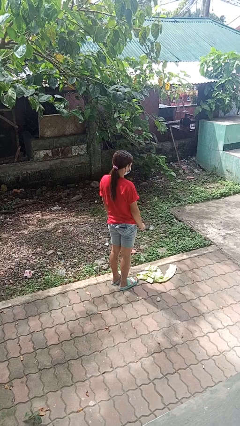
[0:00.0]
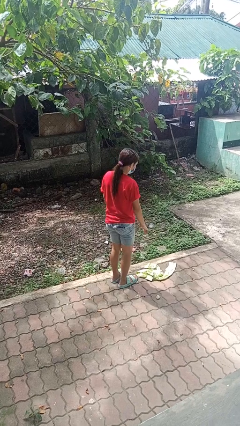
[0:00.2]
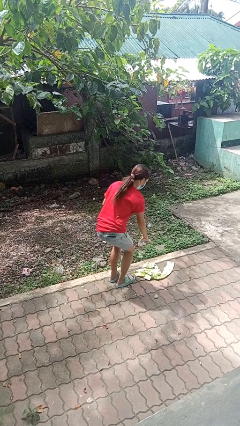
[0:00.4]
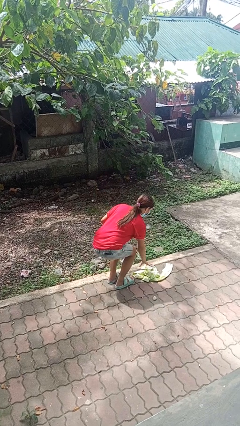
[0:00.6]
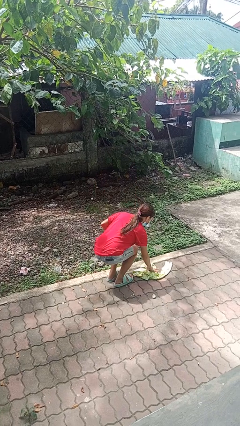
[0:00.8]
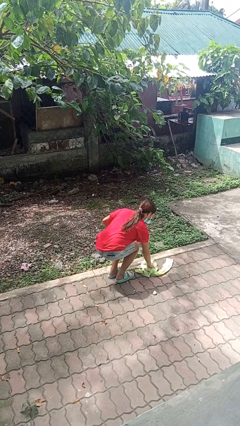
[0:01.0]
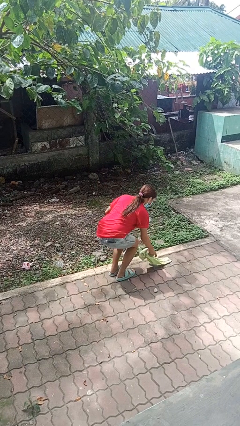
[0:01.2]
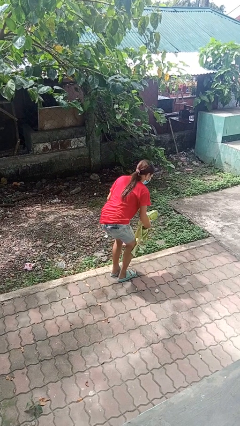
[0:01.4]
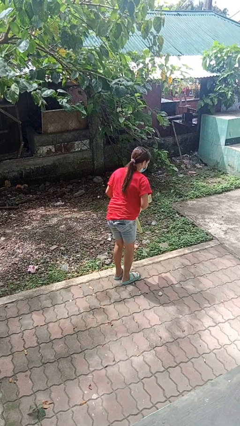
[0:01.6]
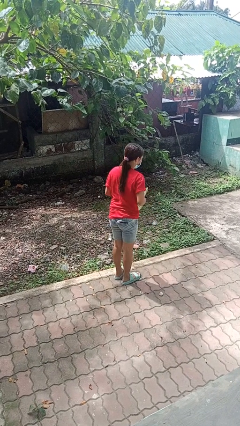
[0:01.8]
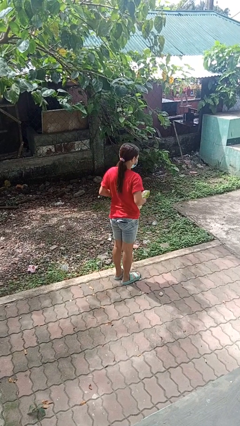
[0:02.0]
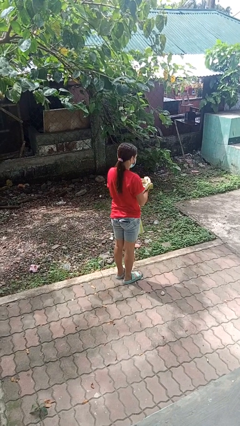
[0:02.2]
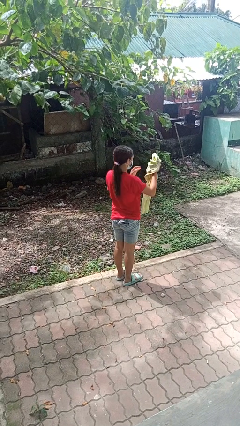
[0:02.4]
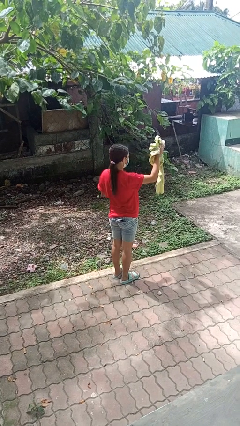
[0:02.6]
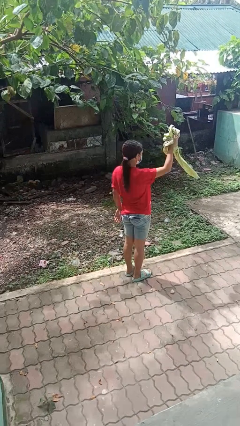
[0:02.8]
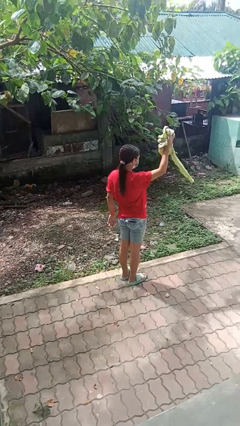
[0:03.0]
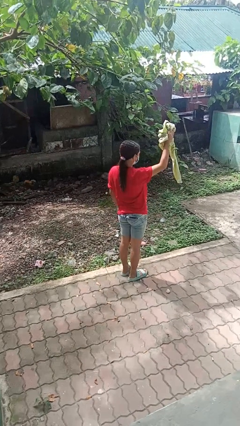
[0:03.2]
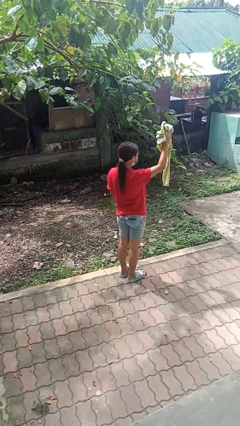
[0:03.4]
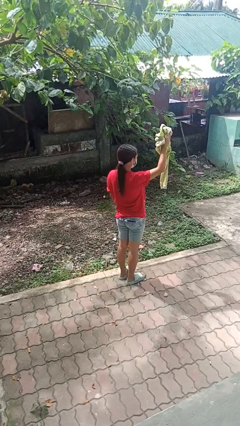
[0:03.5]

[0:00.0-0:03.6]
person picks up object from floor

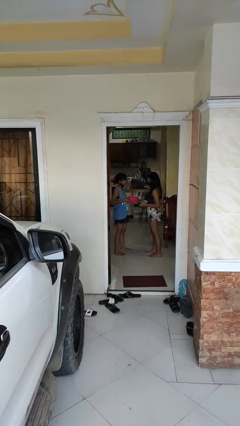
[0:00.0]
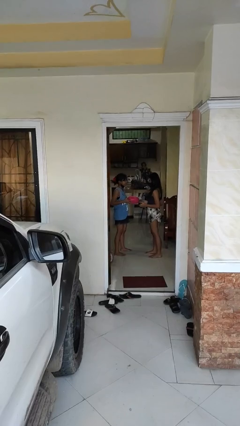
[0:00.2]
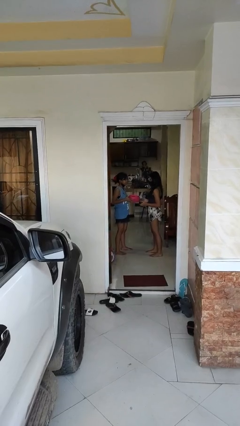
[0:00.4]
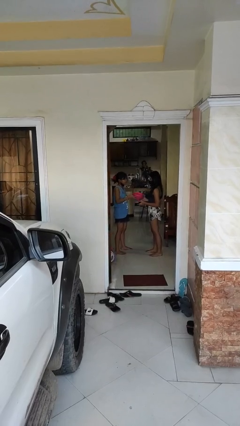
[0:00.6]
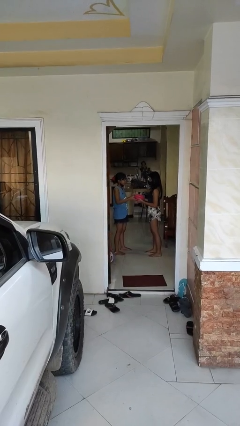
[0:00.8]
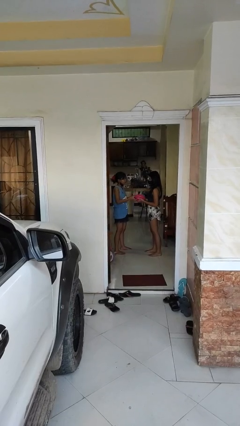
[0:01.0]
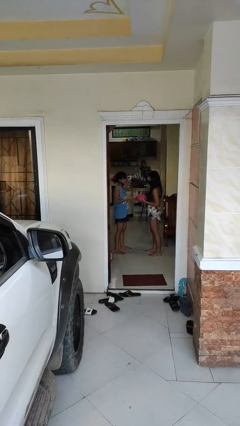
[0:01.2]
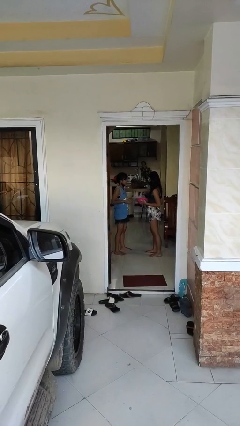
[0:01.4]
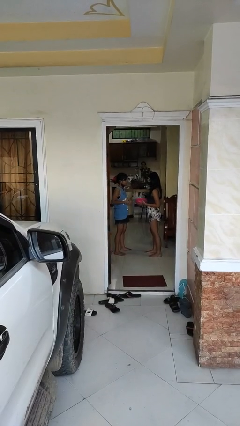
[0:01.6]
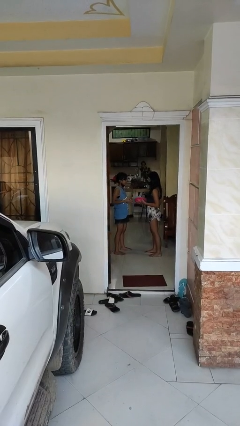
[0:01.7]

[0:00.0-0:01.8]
person transfers object to person

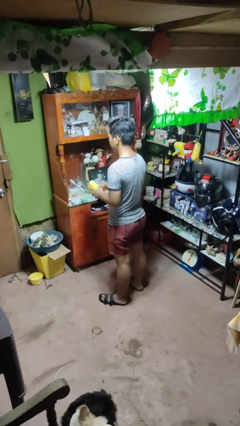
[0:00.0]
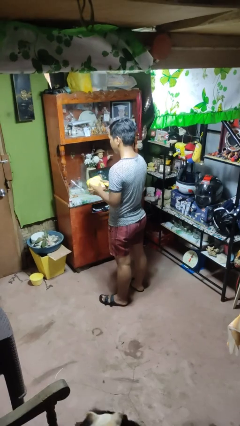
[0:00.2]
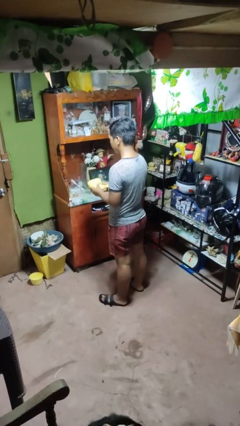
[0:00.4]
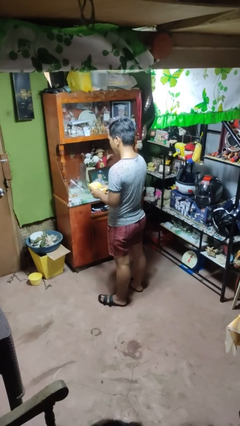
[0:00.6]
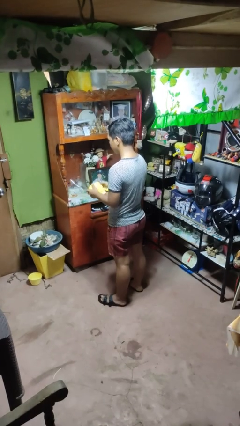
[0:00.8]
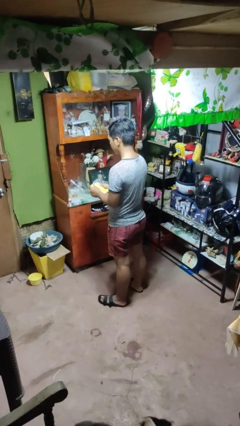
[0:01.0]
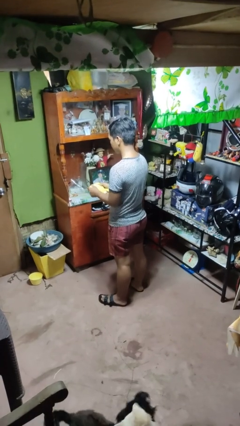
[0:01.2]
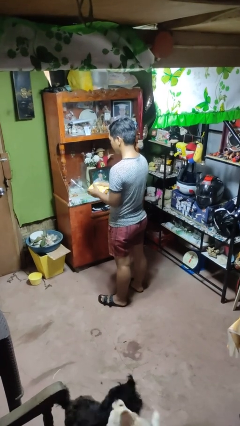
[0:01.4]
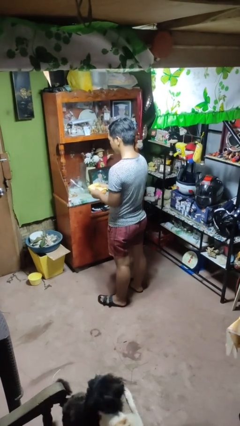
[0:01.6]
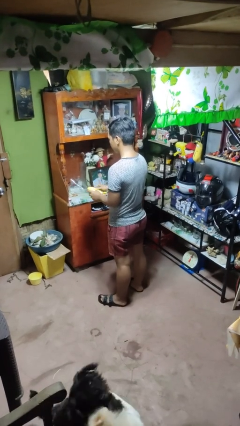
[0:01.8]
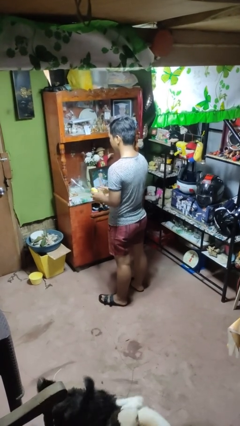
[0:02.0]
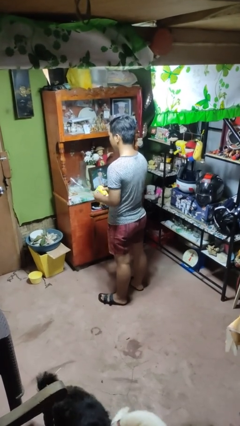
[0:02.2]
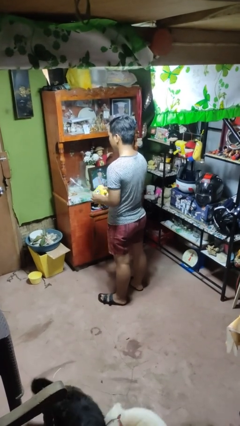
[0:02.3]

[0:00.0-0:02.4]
person squeezes object

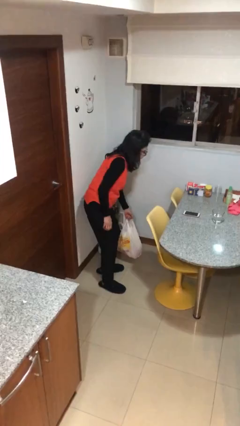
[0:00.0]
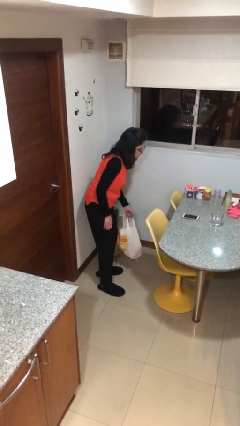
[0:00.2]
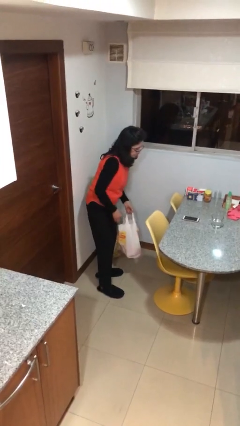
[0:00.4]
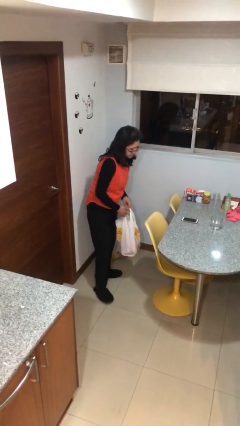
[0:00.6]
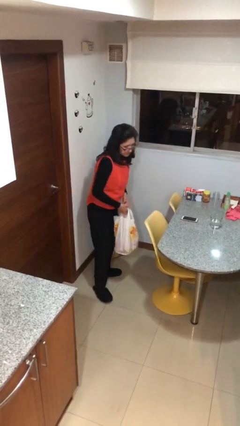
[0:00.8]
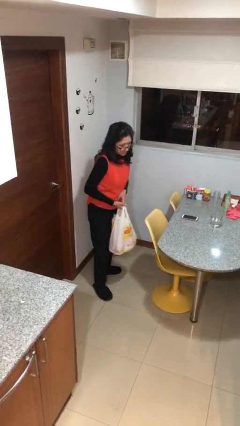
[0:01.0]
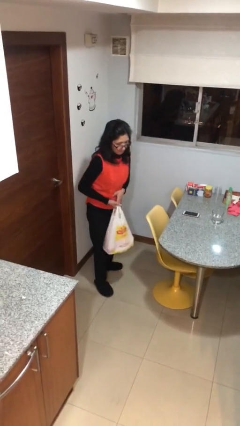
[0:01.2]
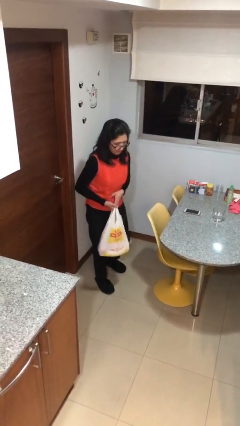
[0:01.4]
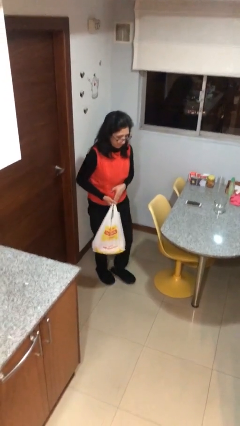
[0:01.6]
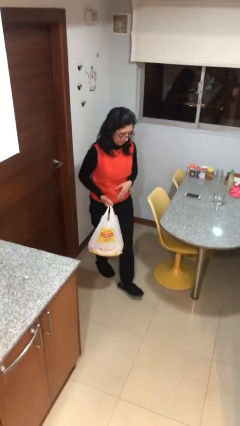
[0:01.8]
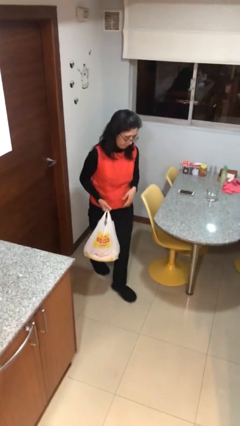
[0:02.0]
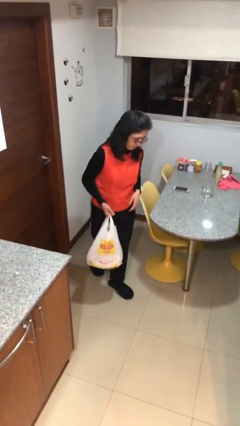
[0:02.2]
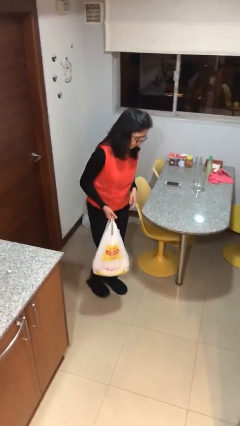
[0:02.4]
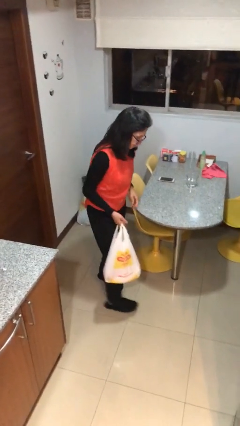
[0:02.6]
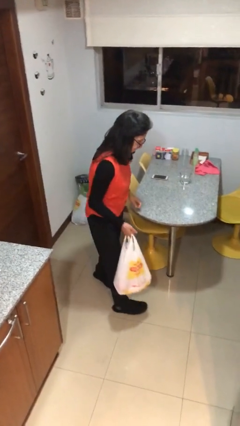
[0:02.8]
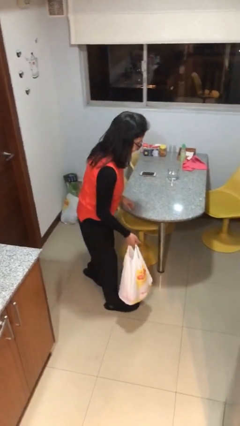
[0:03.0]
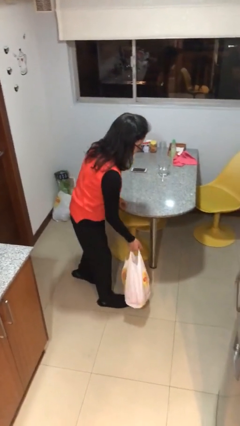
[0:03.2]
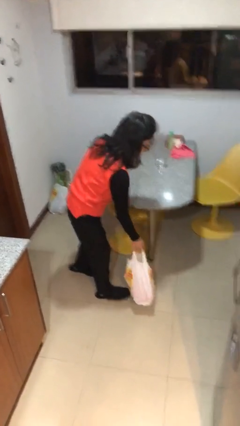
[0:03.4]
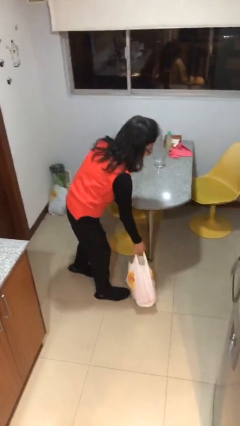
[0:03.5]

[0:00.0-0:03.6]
person carries heavy object

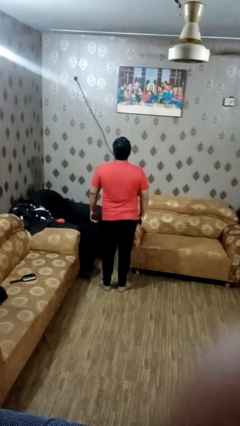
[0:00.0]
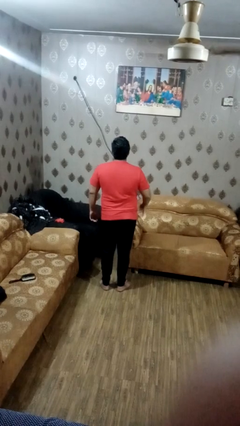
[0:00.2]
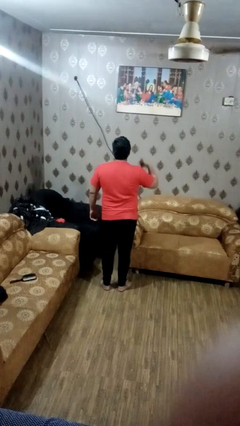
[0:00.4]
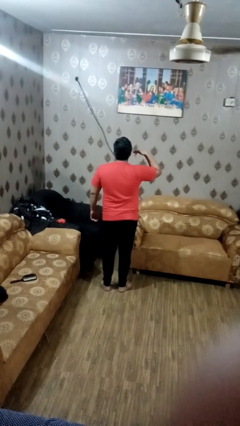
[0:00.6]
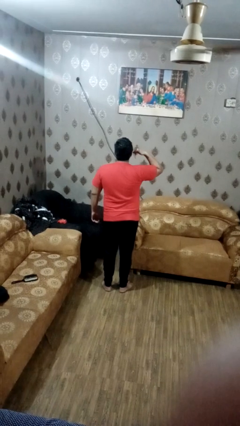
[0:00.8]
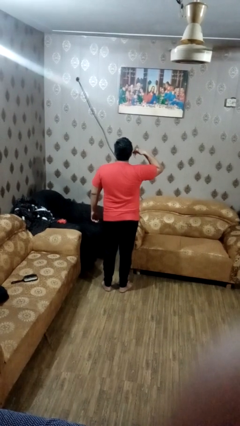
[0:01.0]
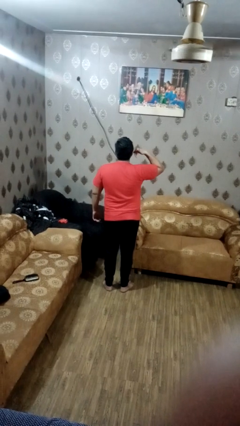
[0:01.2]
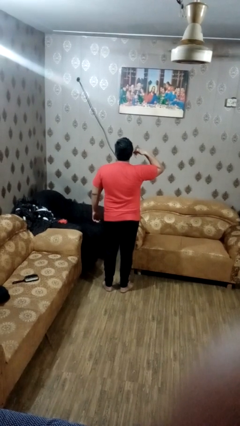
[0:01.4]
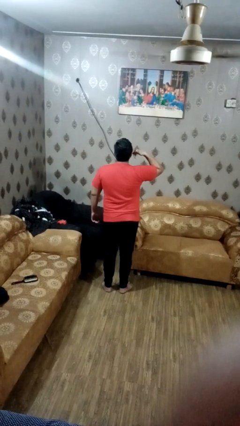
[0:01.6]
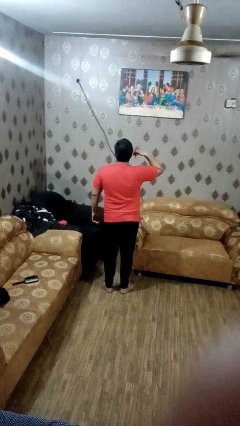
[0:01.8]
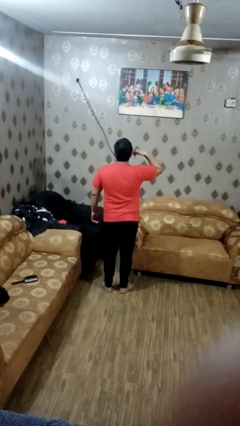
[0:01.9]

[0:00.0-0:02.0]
person gestures call me

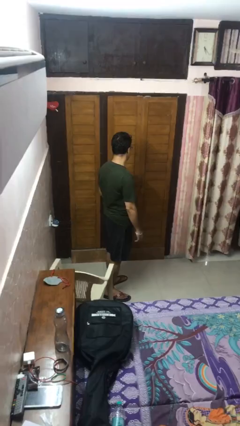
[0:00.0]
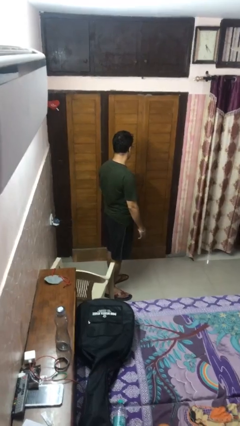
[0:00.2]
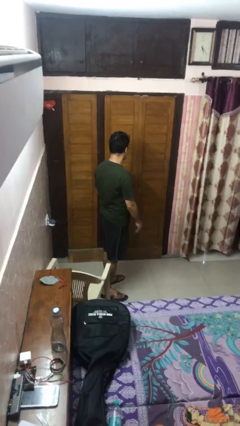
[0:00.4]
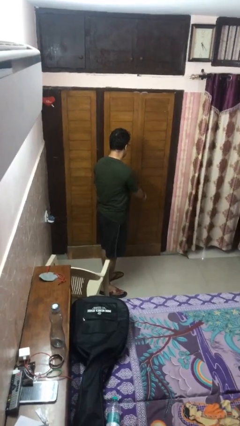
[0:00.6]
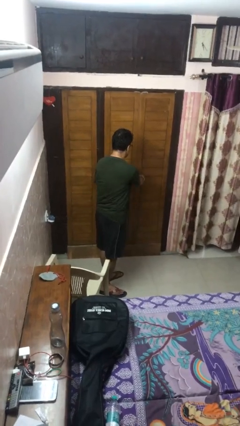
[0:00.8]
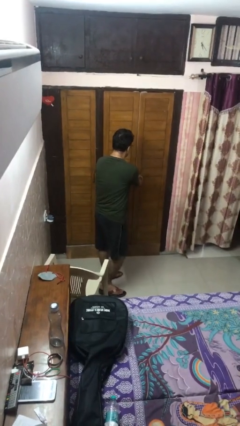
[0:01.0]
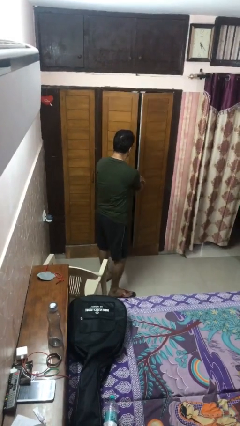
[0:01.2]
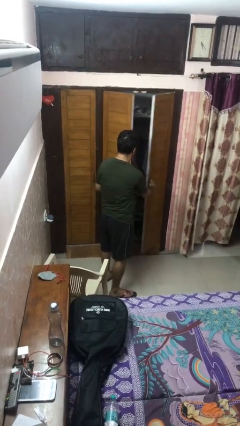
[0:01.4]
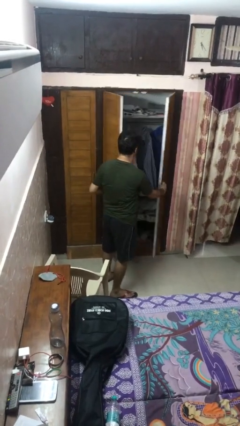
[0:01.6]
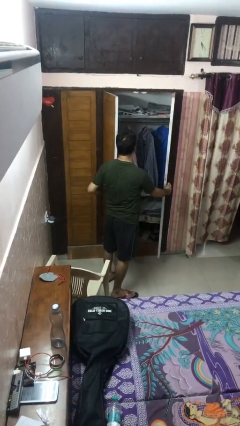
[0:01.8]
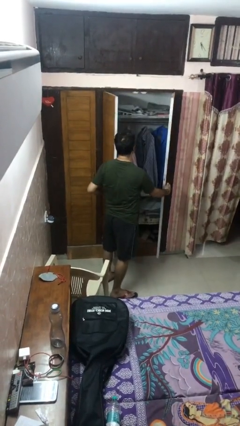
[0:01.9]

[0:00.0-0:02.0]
person opens closet door

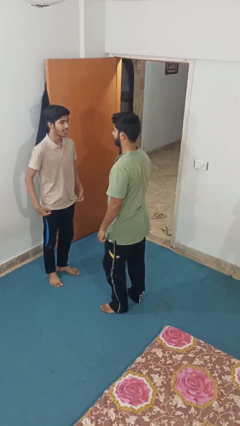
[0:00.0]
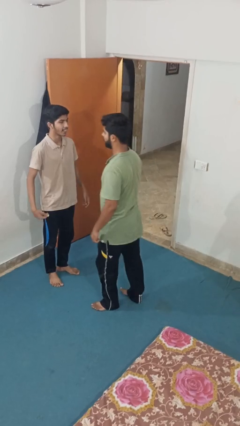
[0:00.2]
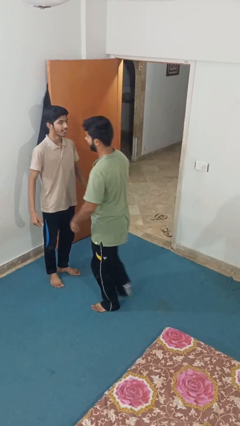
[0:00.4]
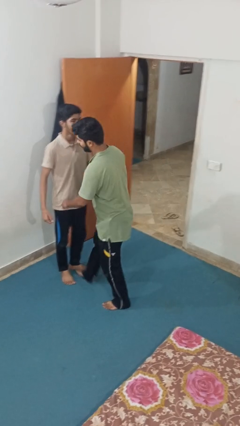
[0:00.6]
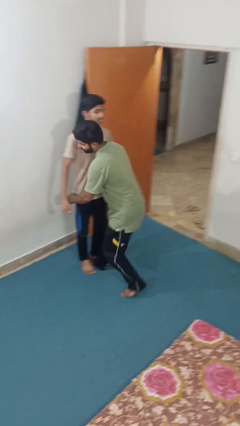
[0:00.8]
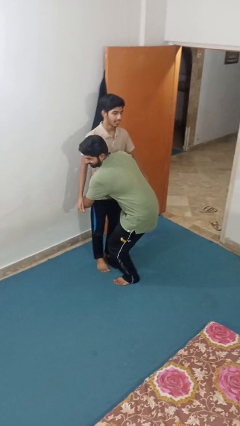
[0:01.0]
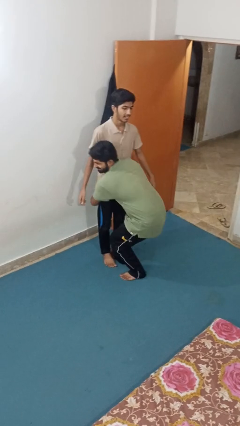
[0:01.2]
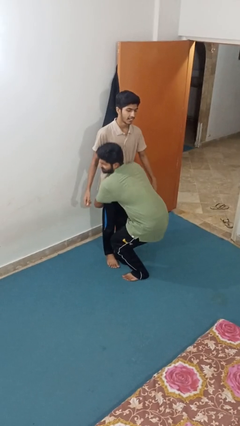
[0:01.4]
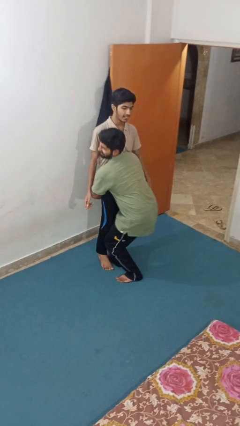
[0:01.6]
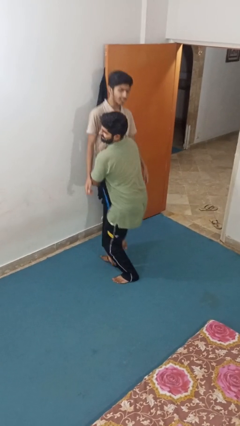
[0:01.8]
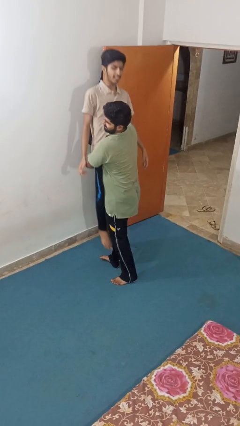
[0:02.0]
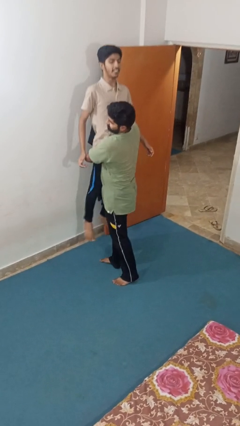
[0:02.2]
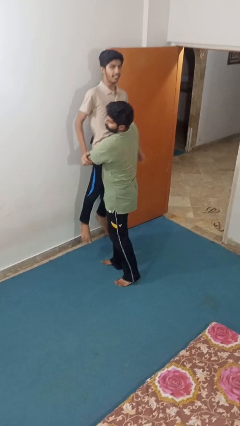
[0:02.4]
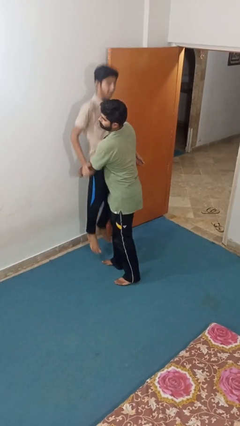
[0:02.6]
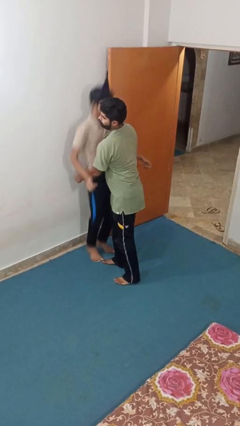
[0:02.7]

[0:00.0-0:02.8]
person picks up person
